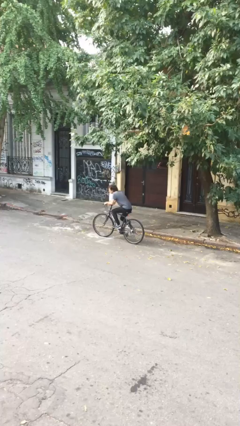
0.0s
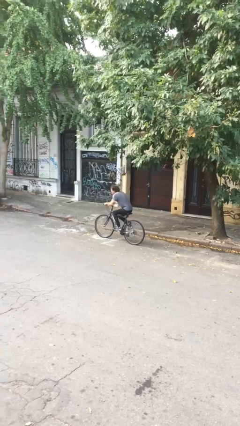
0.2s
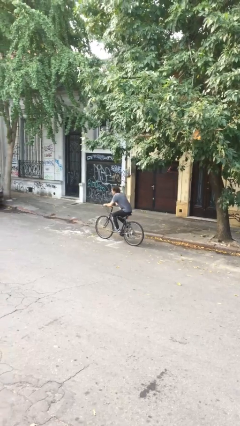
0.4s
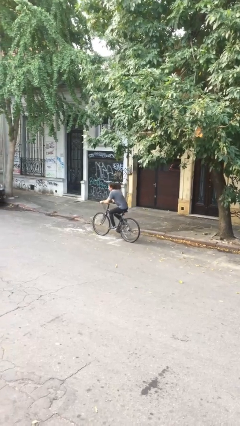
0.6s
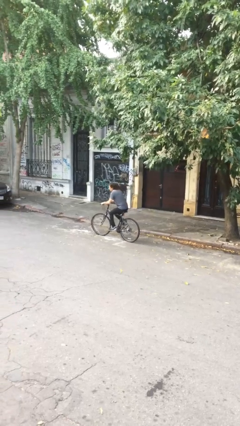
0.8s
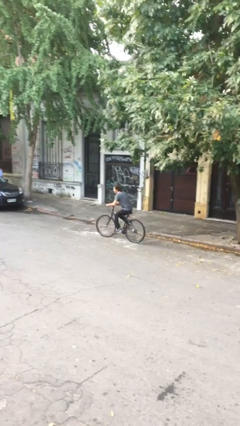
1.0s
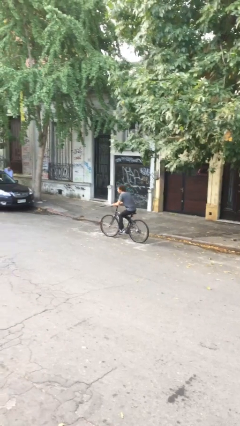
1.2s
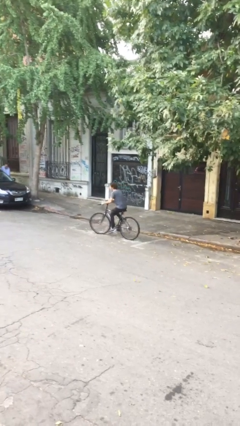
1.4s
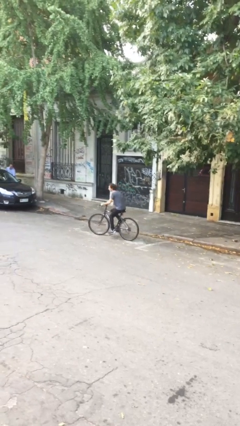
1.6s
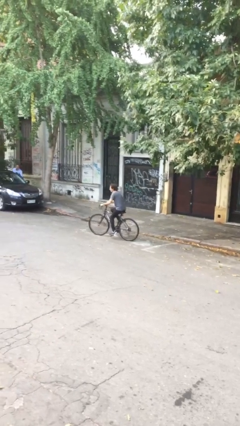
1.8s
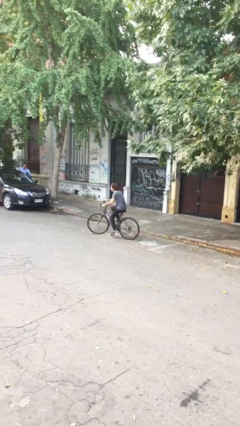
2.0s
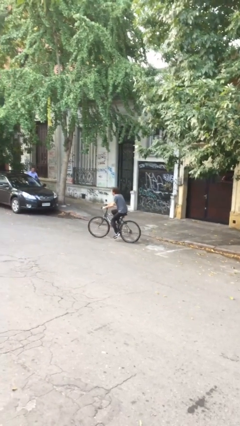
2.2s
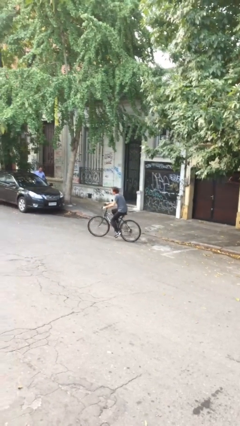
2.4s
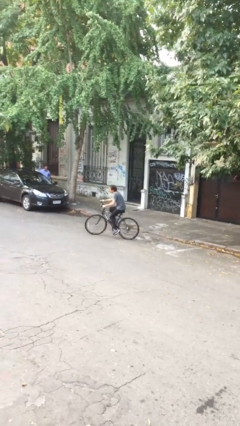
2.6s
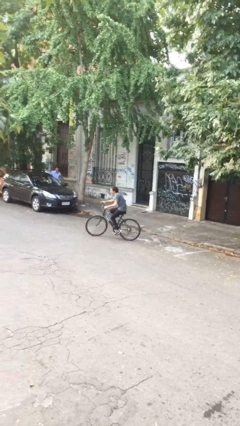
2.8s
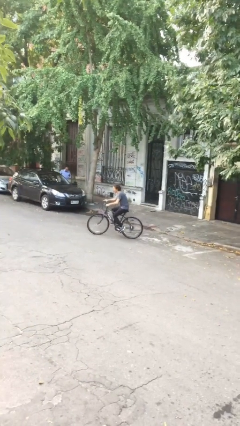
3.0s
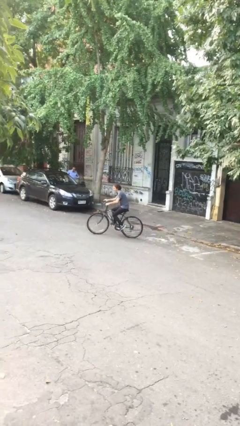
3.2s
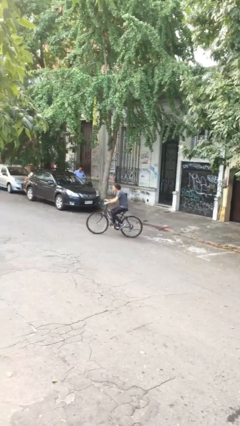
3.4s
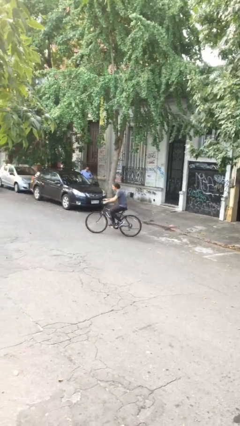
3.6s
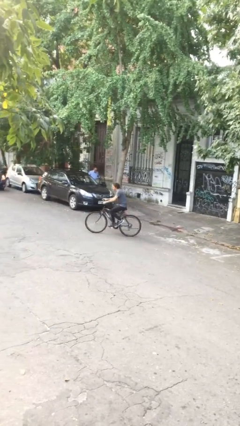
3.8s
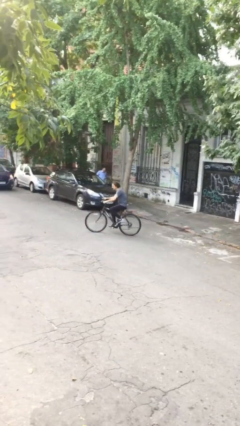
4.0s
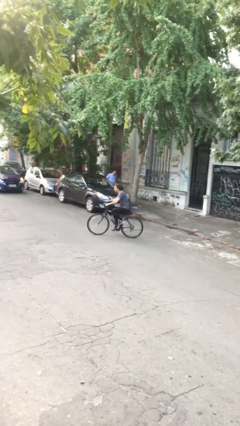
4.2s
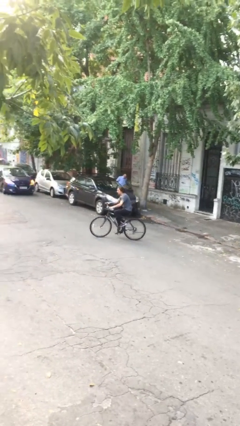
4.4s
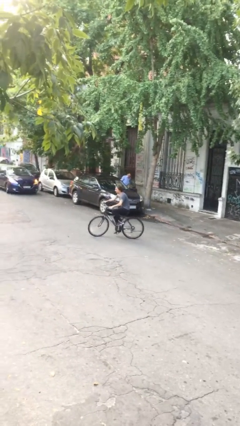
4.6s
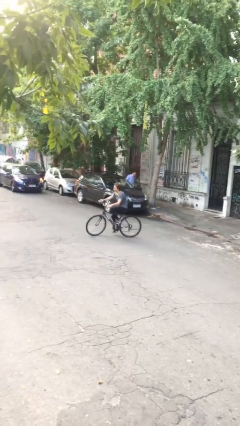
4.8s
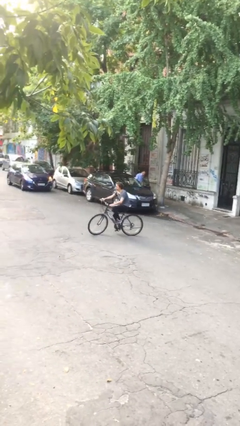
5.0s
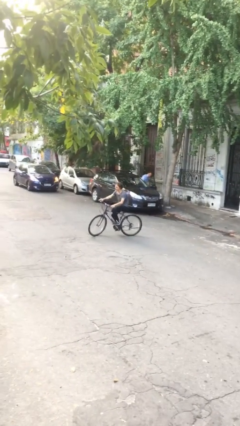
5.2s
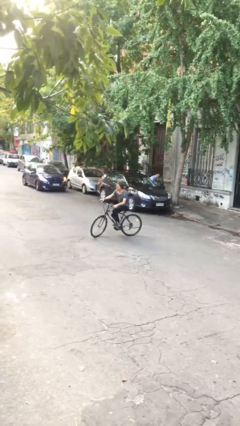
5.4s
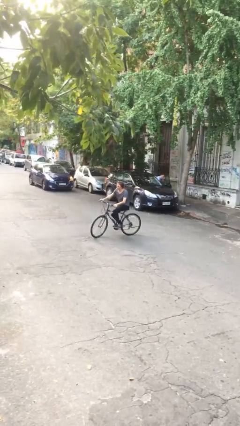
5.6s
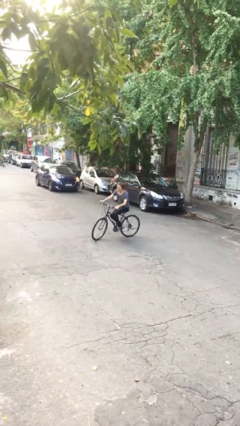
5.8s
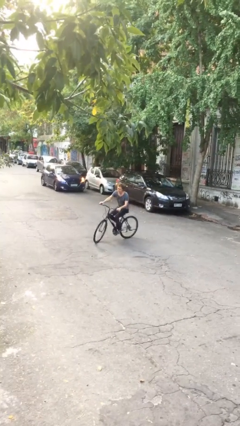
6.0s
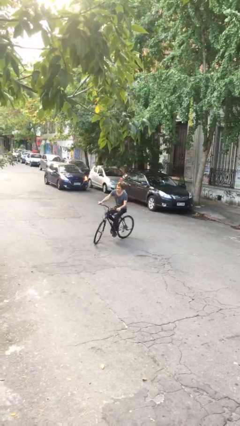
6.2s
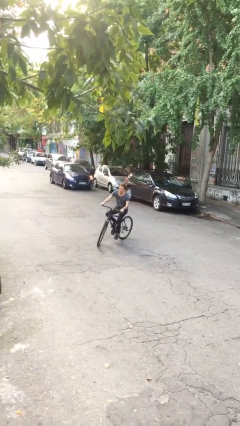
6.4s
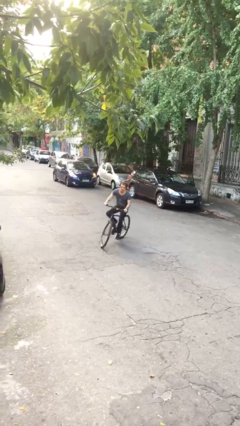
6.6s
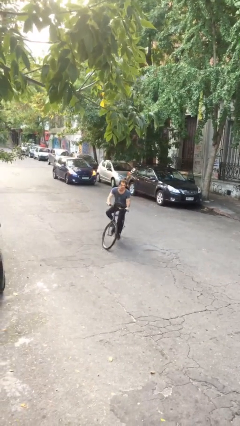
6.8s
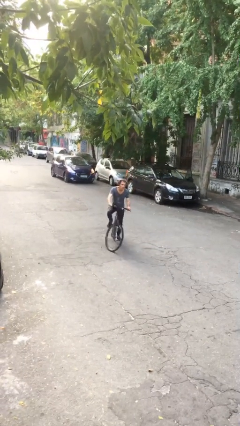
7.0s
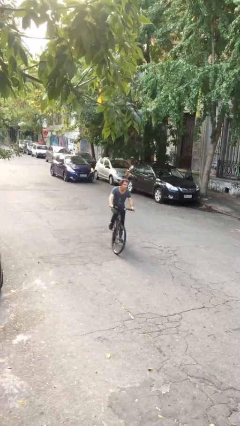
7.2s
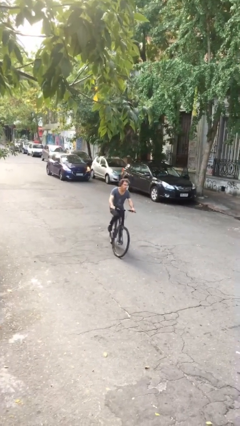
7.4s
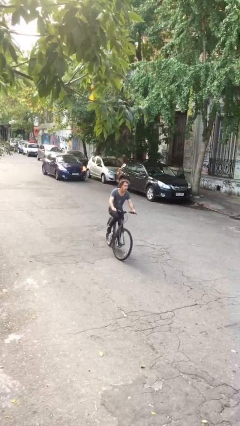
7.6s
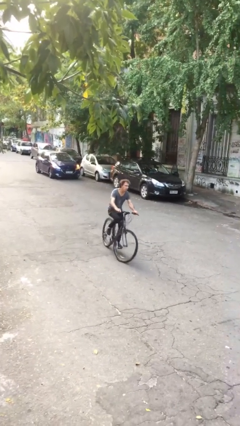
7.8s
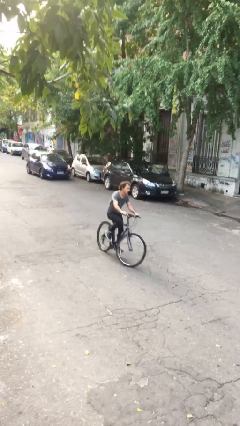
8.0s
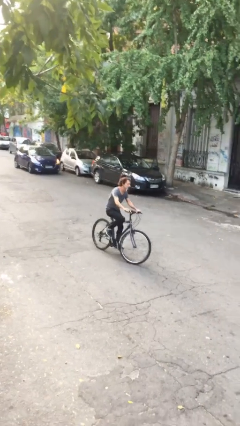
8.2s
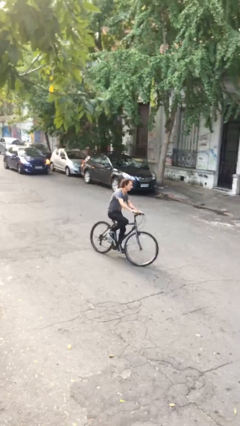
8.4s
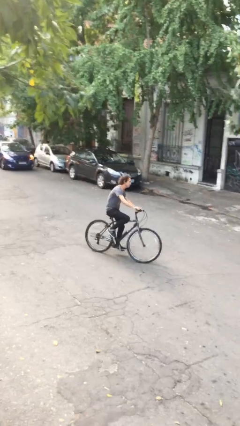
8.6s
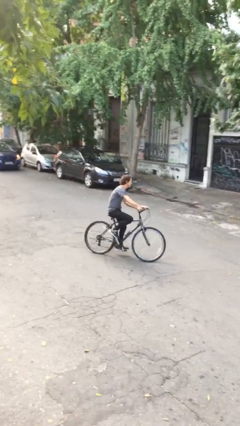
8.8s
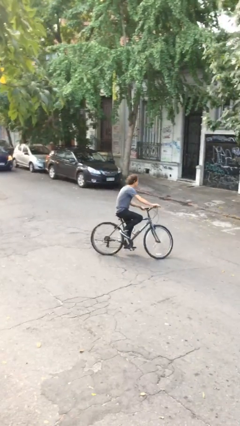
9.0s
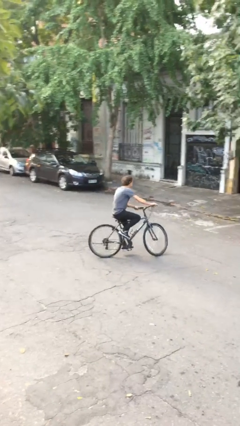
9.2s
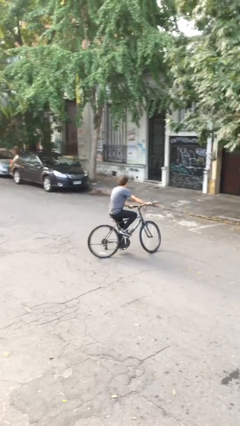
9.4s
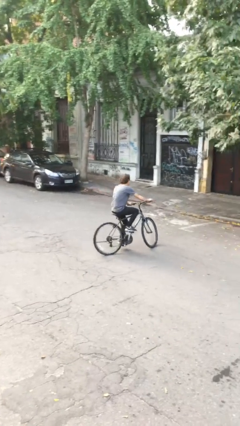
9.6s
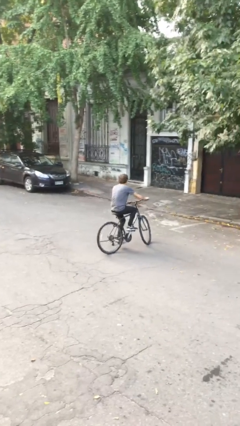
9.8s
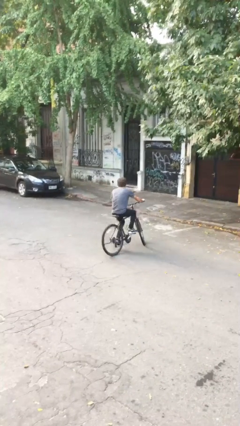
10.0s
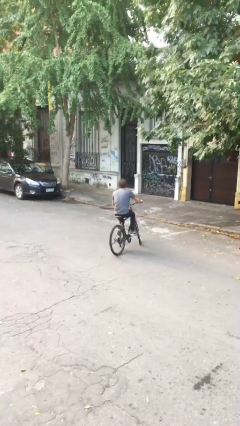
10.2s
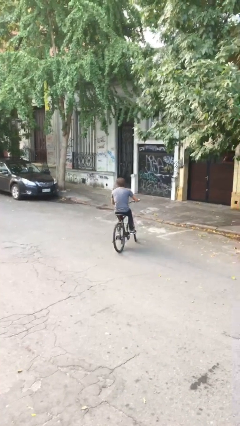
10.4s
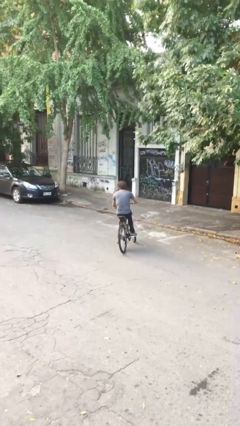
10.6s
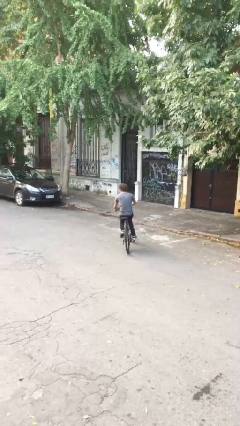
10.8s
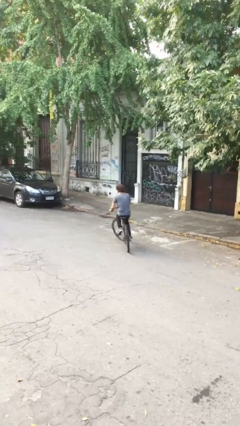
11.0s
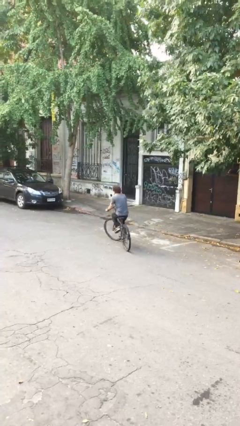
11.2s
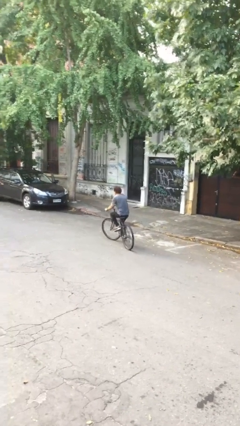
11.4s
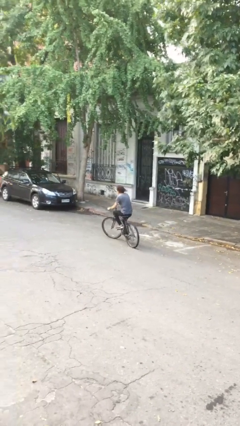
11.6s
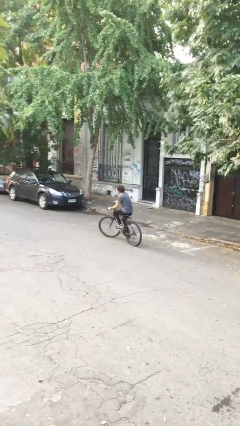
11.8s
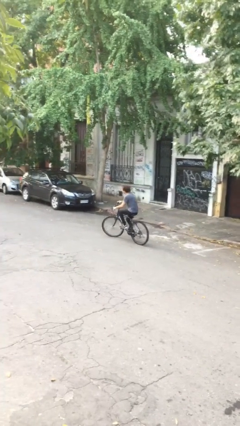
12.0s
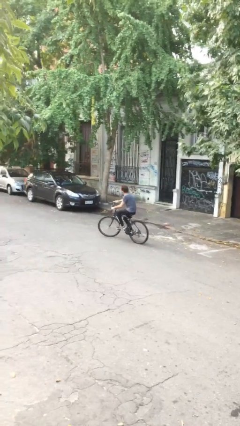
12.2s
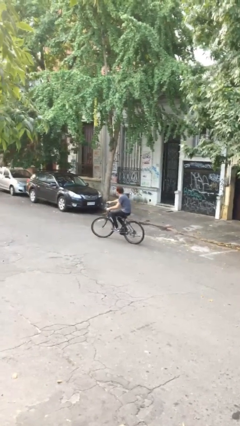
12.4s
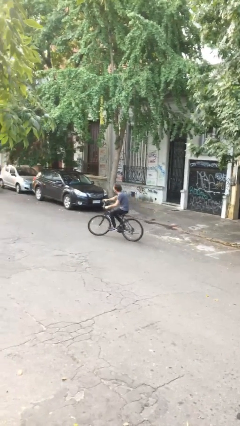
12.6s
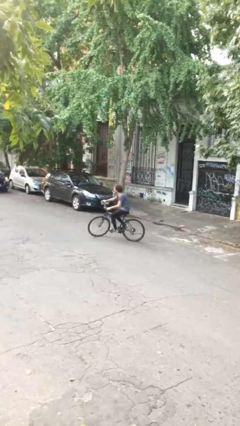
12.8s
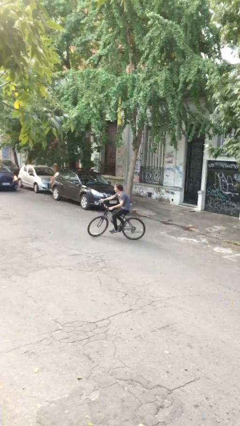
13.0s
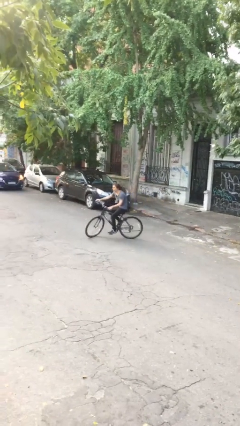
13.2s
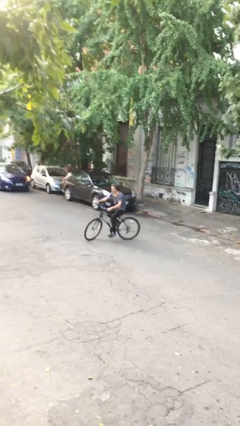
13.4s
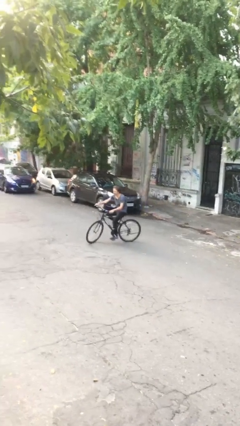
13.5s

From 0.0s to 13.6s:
person rides bicycle

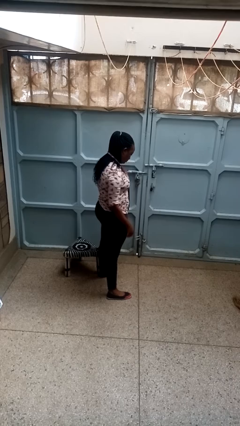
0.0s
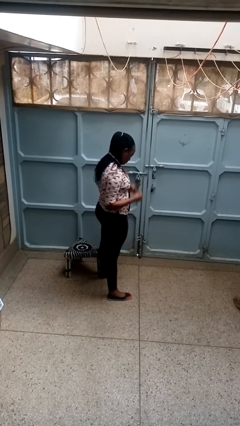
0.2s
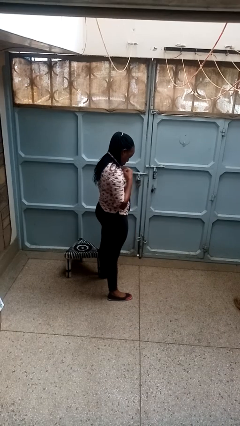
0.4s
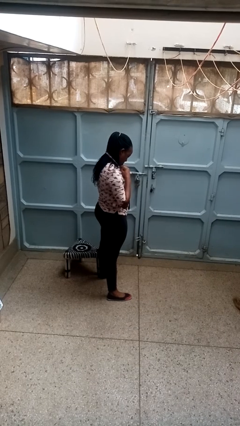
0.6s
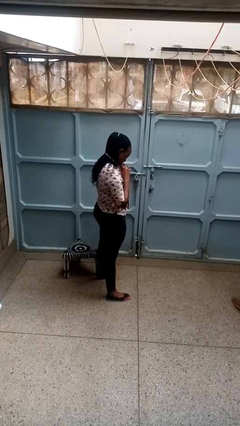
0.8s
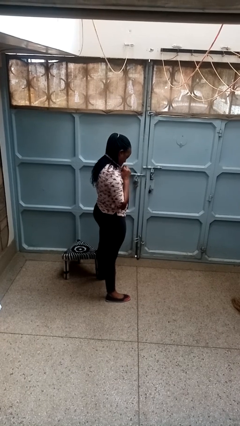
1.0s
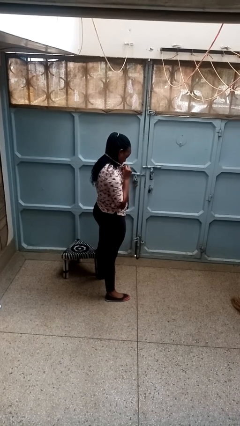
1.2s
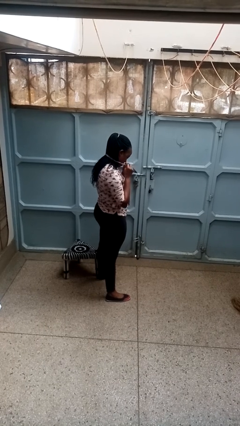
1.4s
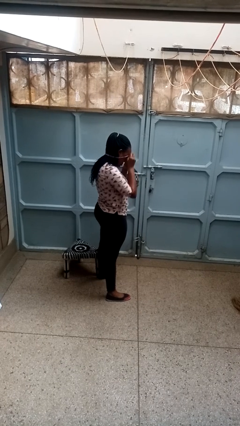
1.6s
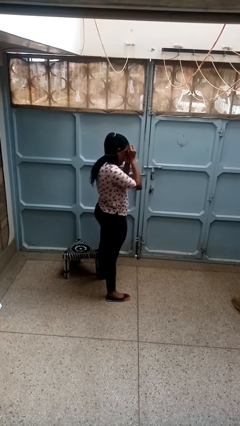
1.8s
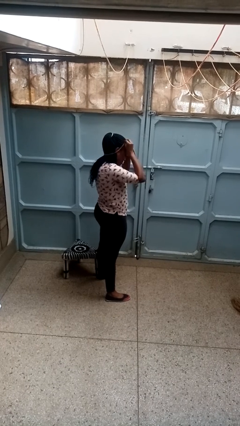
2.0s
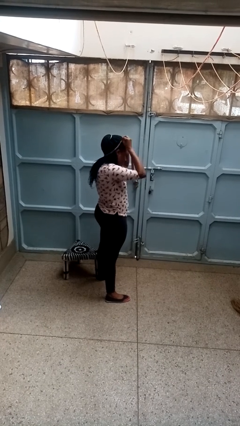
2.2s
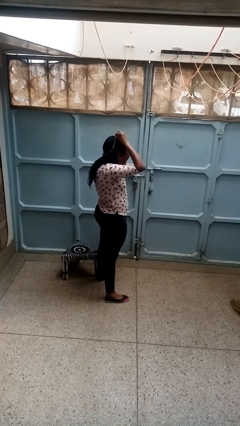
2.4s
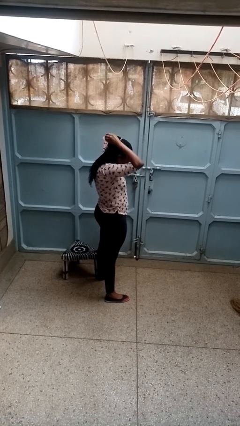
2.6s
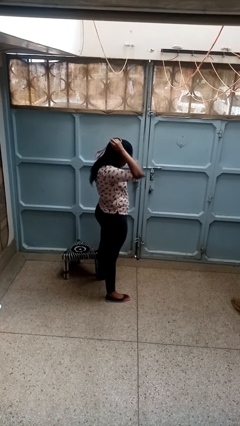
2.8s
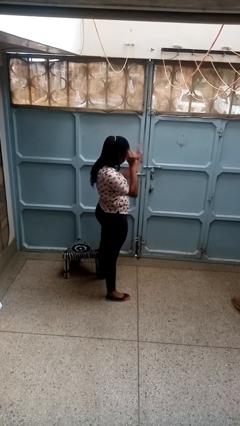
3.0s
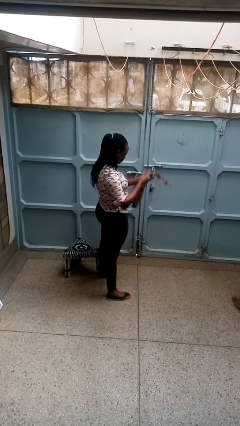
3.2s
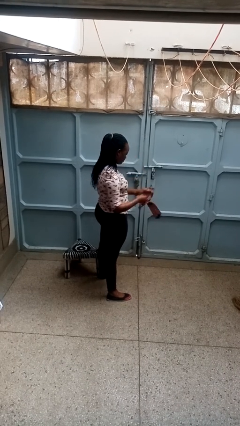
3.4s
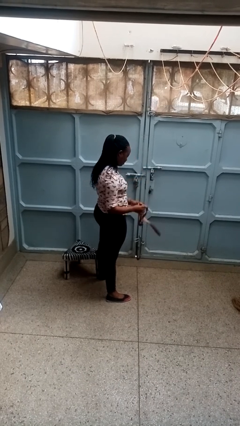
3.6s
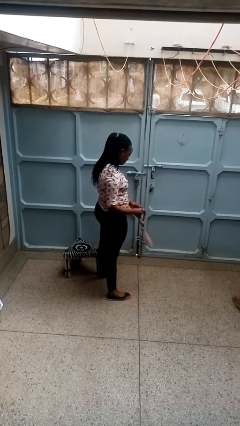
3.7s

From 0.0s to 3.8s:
person takes off necktie

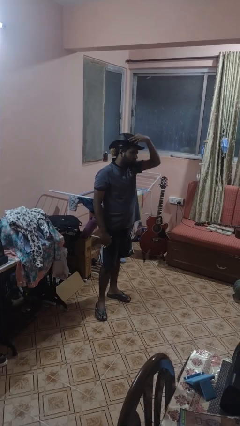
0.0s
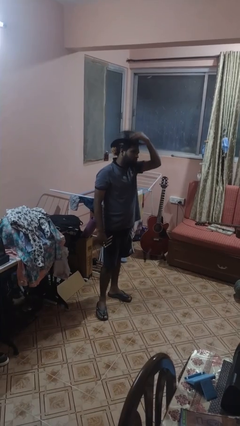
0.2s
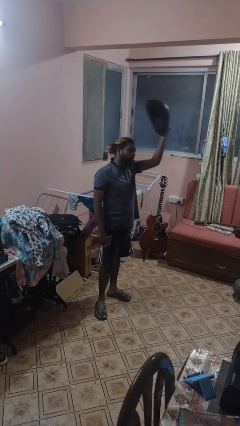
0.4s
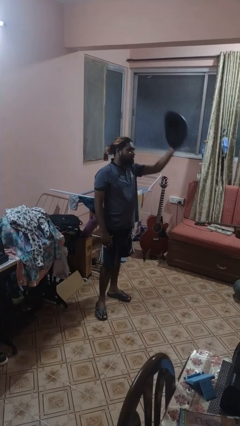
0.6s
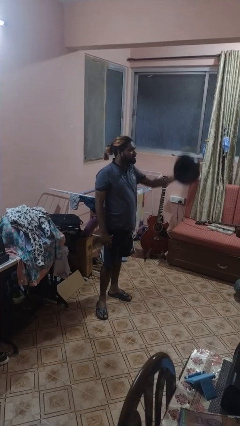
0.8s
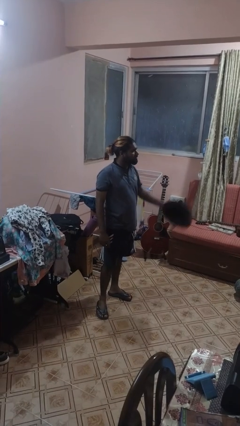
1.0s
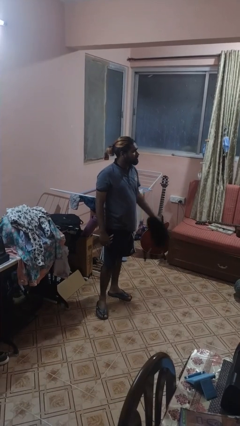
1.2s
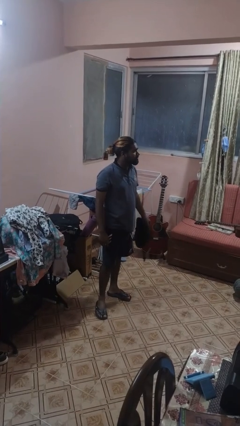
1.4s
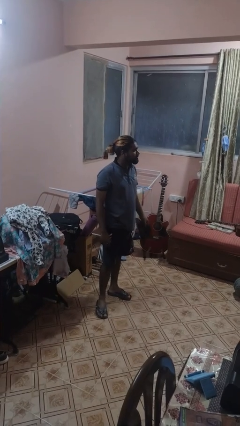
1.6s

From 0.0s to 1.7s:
person takes off hat
